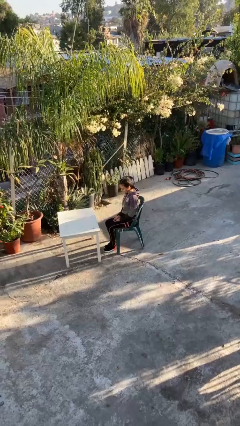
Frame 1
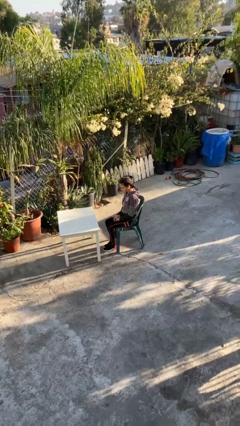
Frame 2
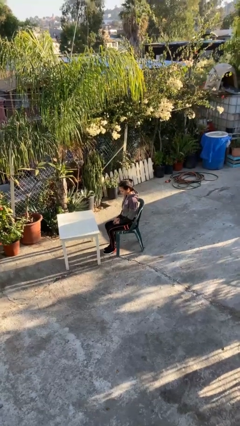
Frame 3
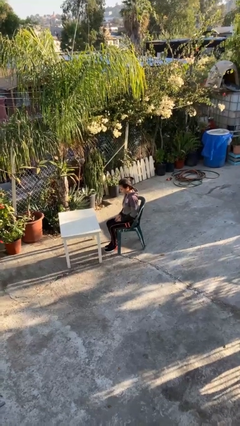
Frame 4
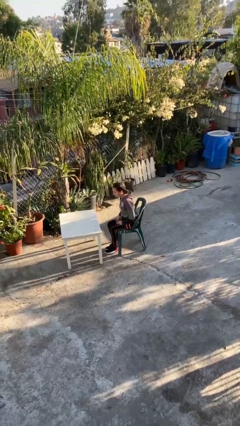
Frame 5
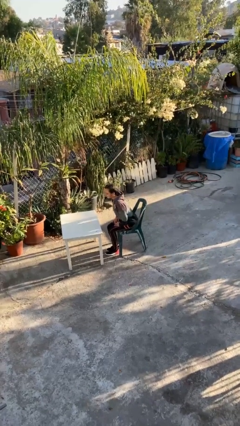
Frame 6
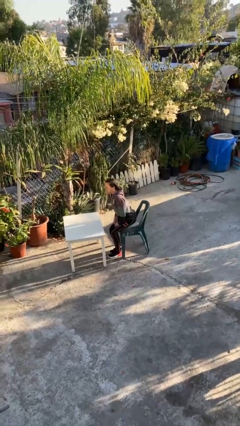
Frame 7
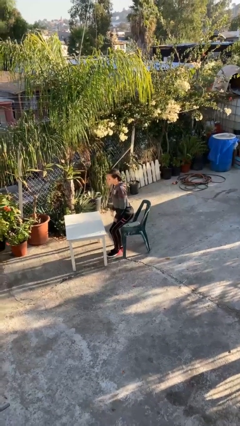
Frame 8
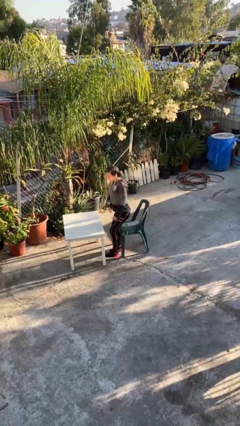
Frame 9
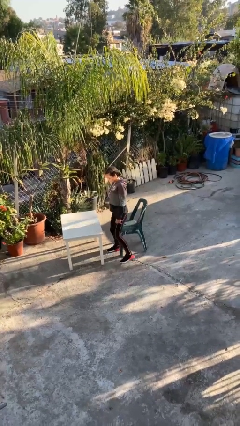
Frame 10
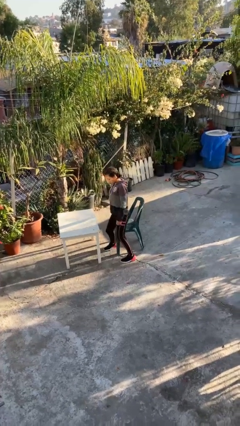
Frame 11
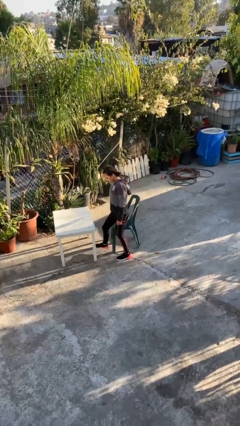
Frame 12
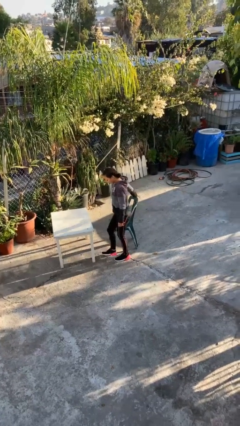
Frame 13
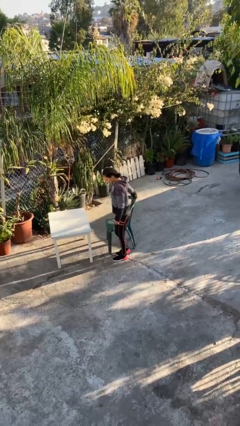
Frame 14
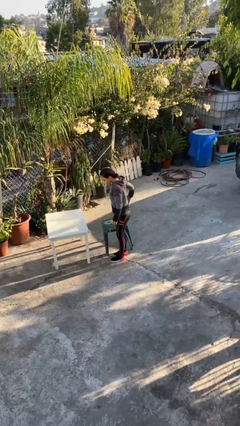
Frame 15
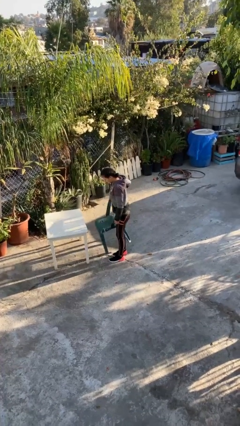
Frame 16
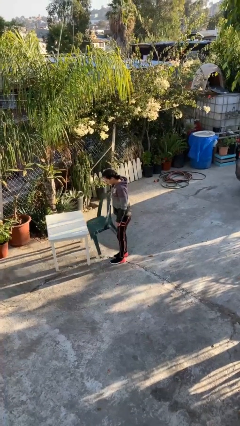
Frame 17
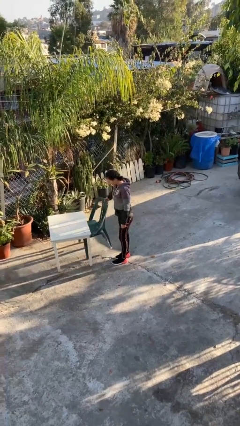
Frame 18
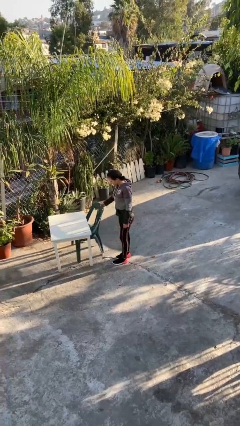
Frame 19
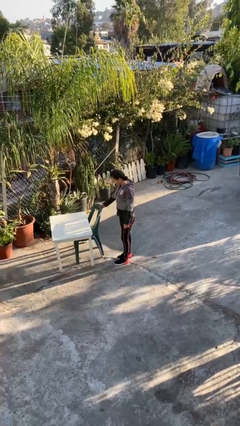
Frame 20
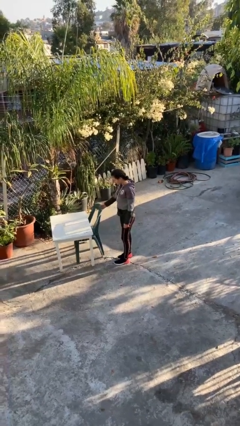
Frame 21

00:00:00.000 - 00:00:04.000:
person stands up

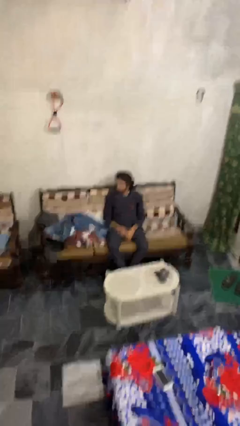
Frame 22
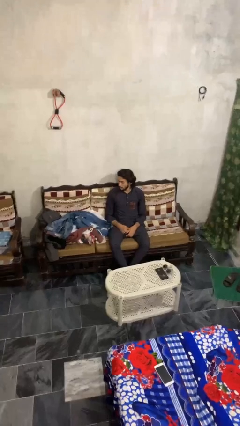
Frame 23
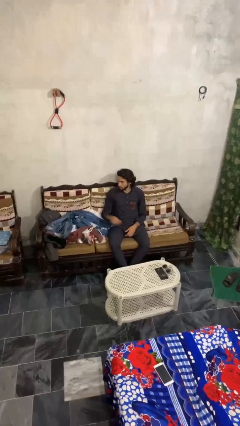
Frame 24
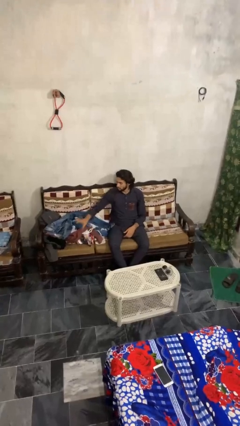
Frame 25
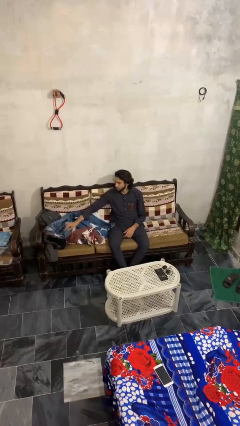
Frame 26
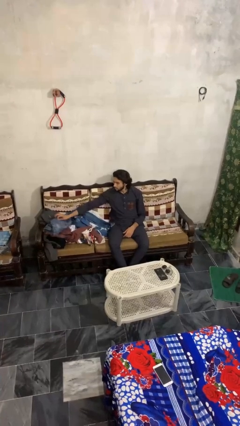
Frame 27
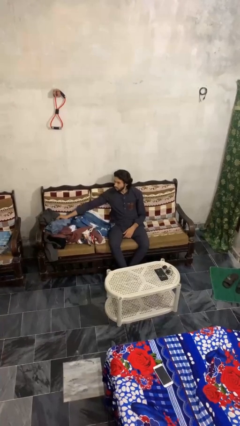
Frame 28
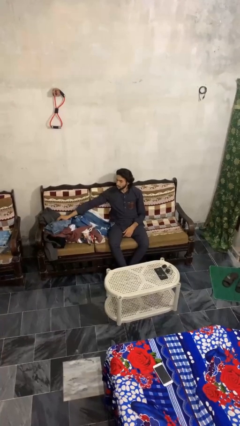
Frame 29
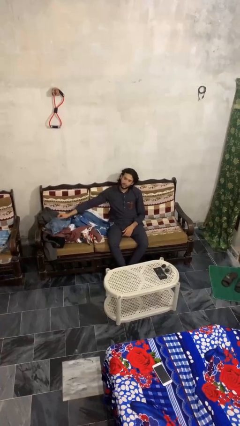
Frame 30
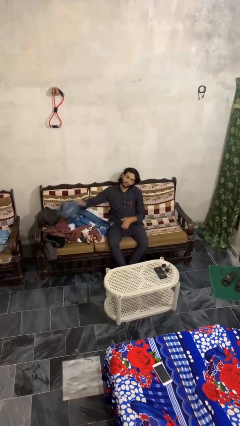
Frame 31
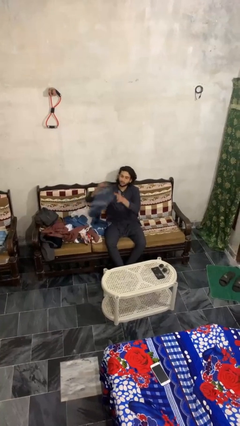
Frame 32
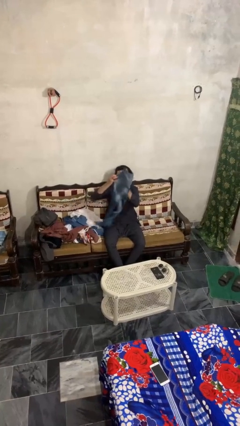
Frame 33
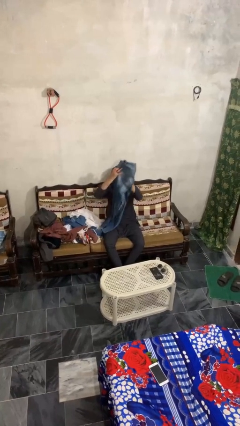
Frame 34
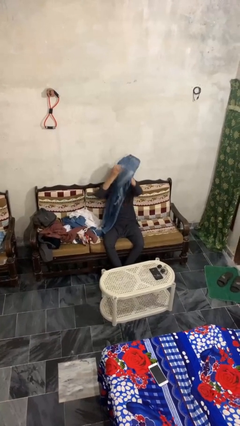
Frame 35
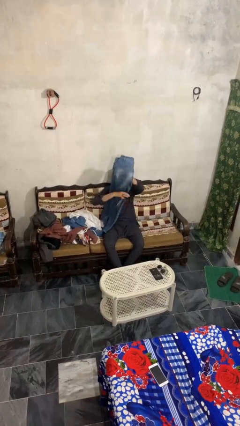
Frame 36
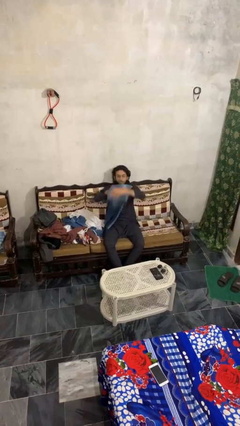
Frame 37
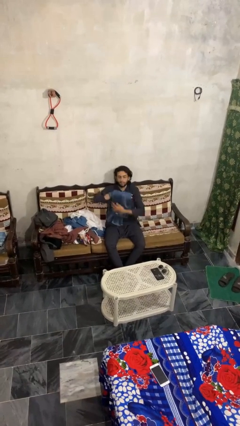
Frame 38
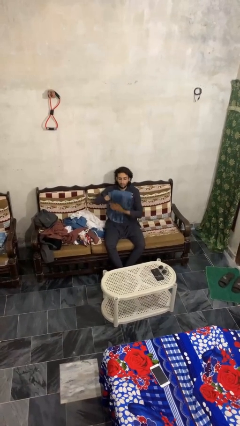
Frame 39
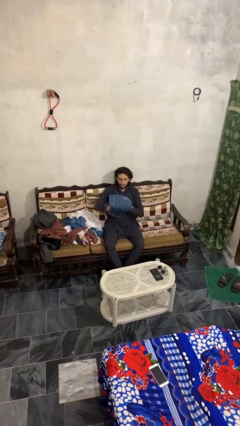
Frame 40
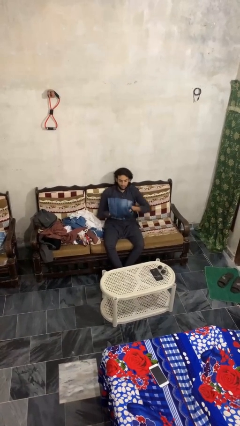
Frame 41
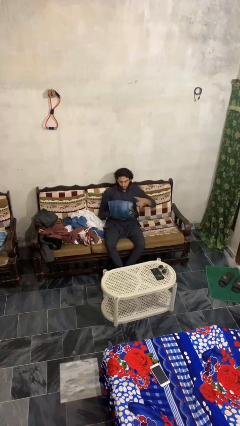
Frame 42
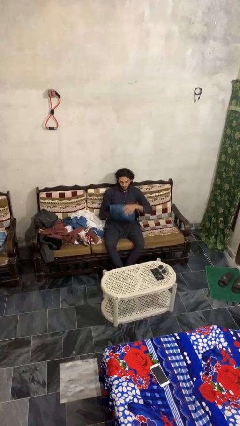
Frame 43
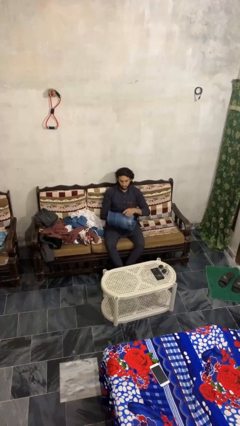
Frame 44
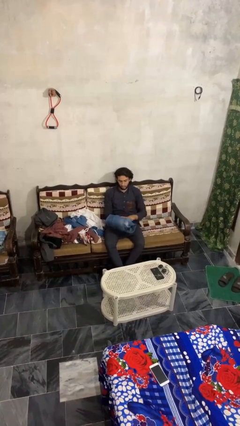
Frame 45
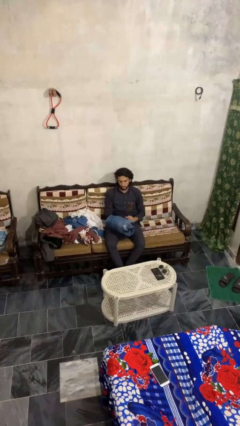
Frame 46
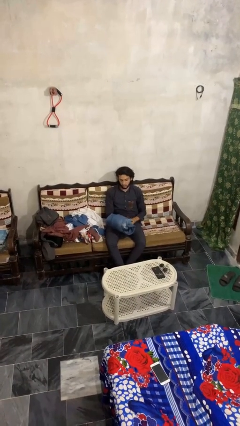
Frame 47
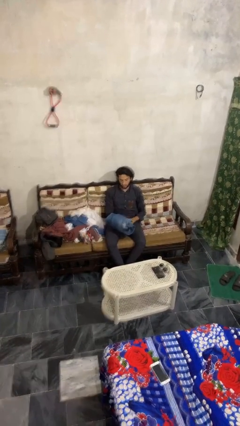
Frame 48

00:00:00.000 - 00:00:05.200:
person folds pants

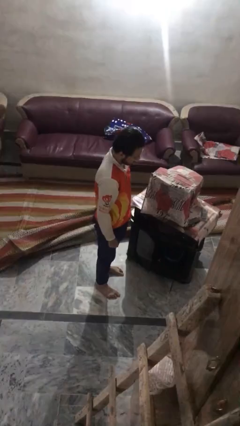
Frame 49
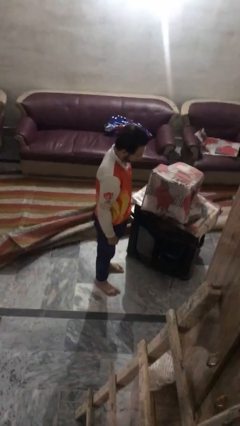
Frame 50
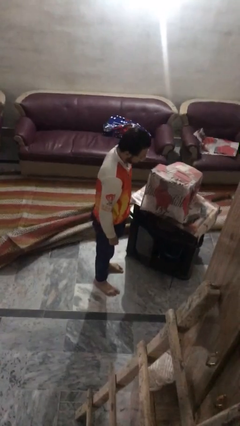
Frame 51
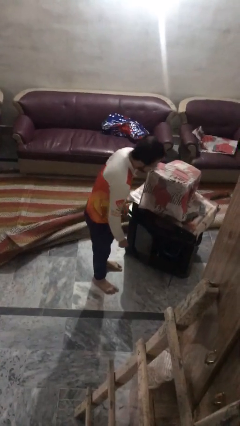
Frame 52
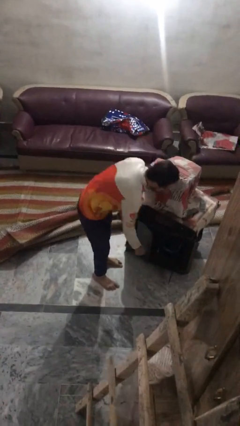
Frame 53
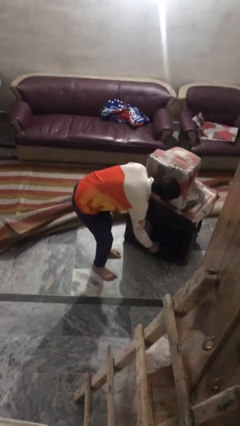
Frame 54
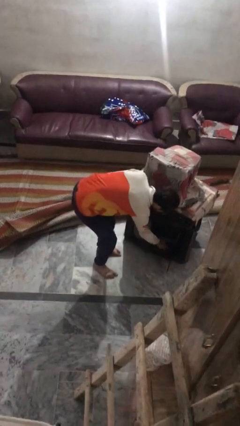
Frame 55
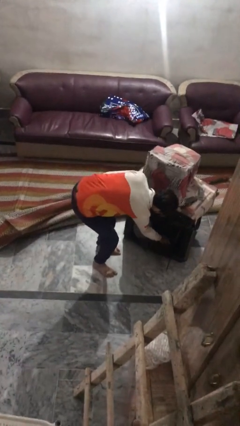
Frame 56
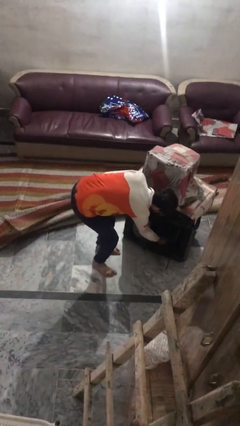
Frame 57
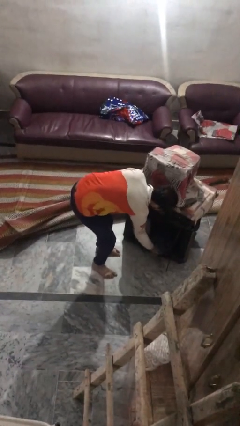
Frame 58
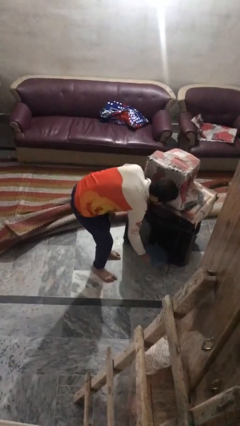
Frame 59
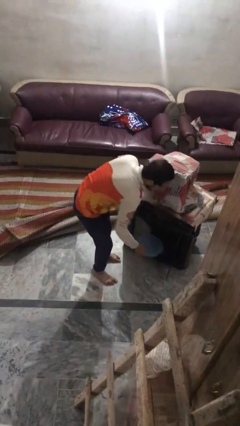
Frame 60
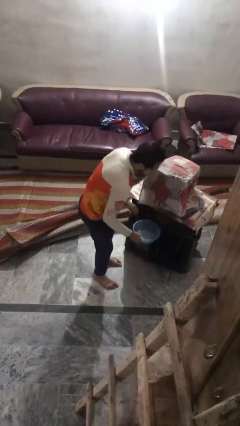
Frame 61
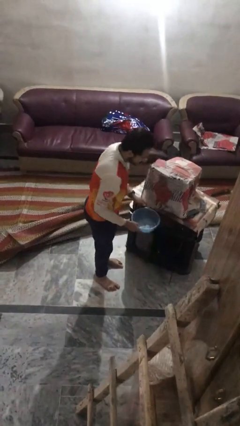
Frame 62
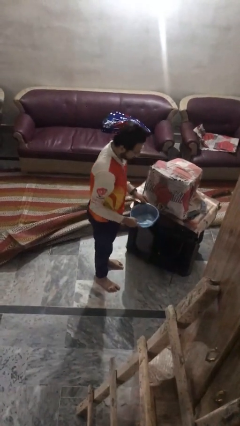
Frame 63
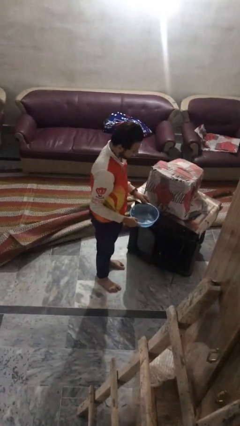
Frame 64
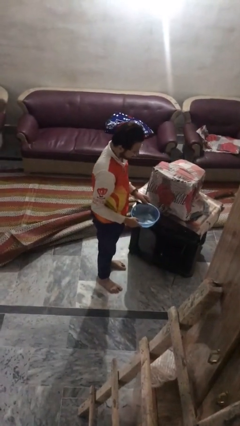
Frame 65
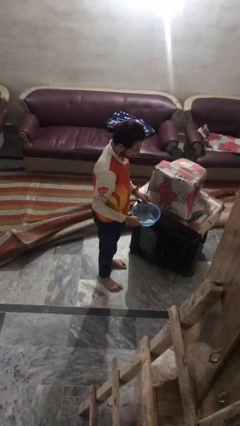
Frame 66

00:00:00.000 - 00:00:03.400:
person picks up object from cabinet

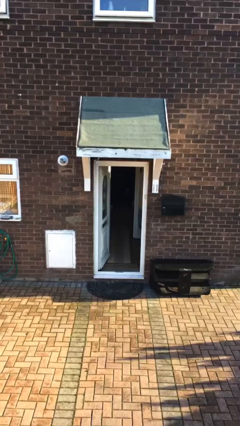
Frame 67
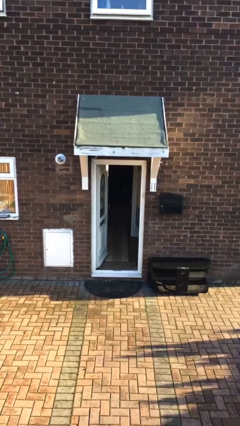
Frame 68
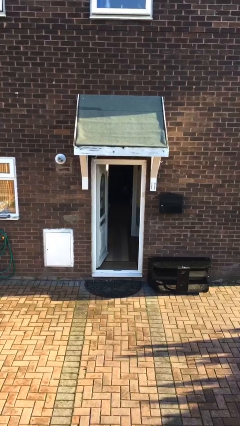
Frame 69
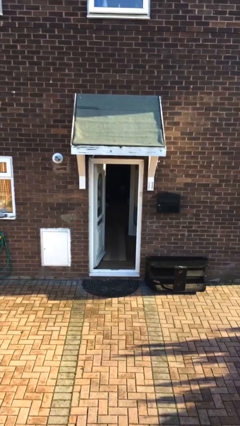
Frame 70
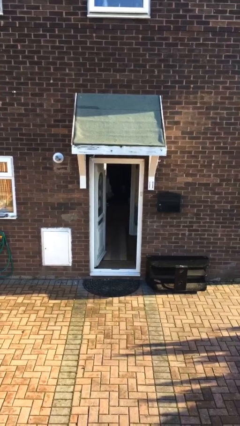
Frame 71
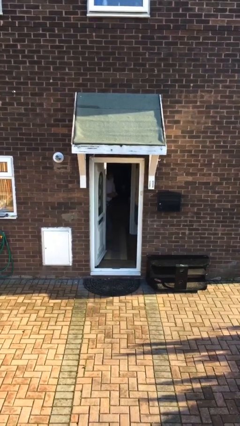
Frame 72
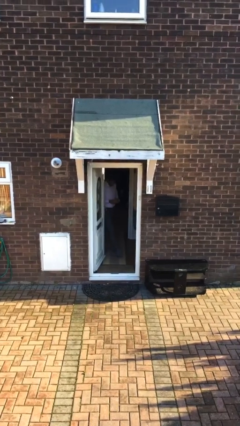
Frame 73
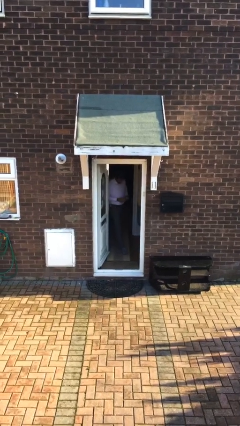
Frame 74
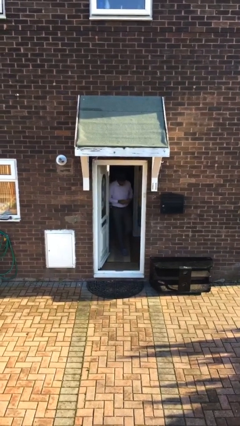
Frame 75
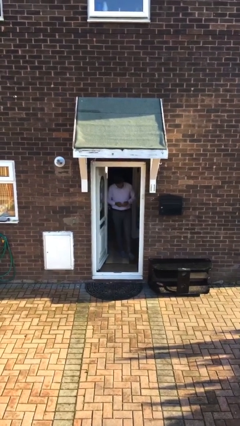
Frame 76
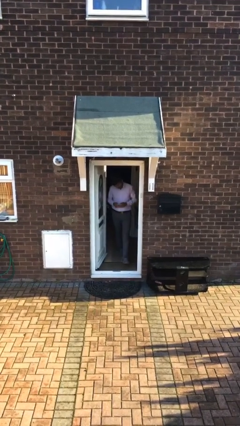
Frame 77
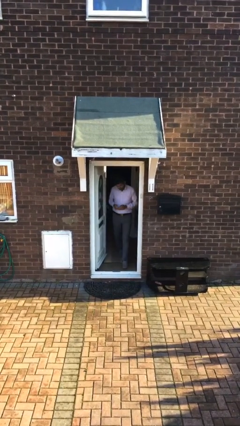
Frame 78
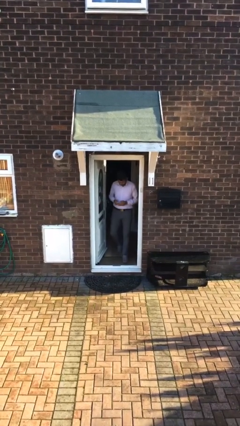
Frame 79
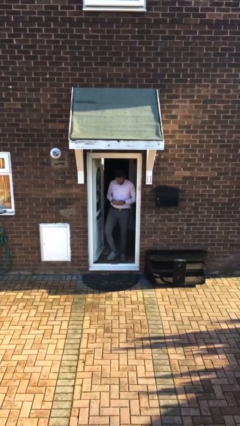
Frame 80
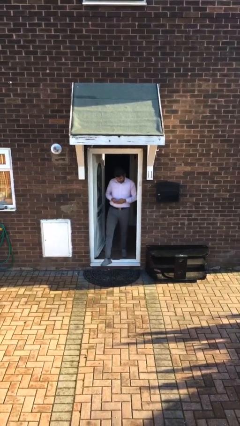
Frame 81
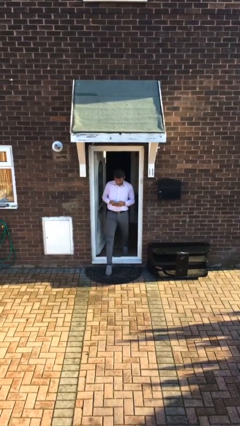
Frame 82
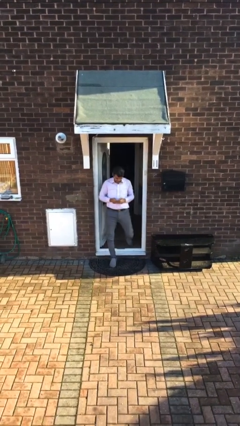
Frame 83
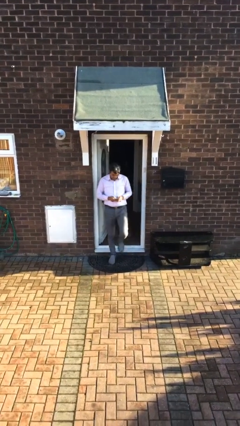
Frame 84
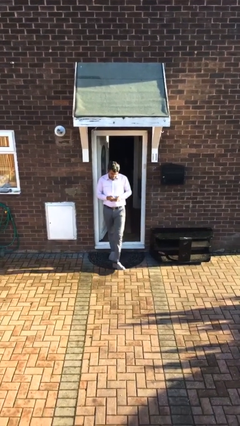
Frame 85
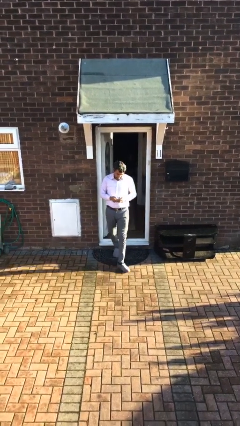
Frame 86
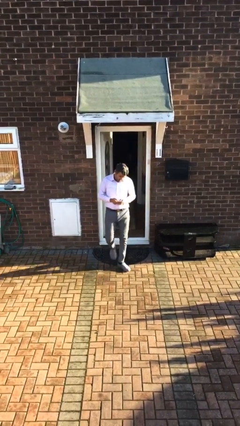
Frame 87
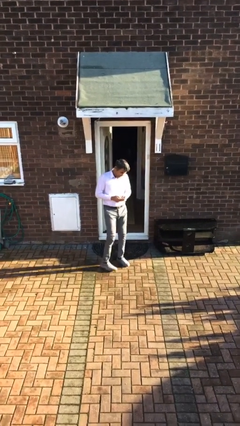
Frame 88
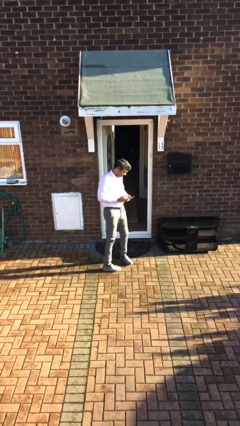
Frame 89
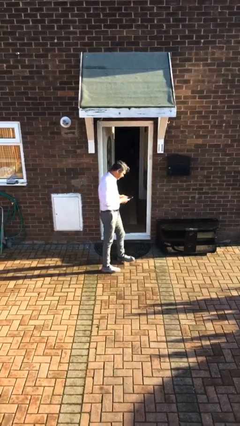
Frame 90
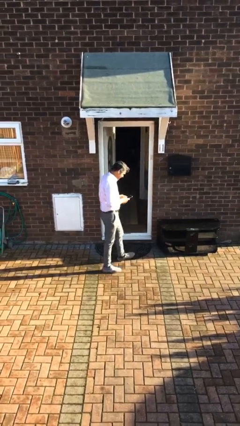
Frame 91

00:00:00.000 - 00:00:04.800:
person enters scene through structure

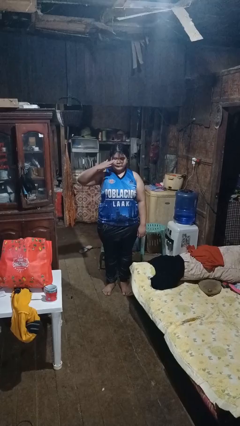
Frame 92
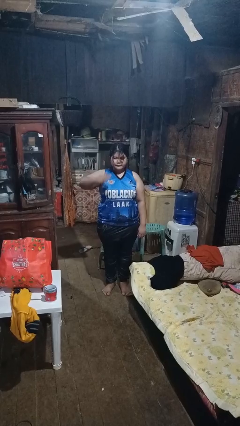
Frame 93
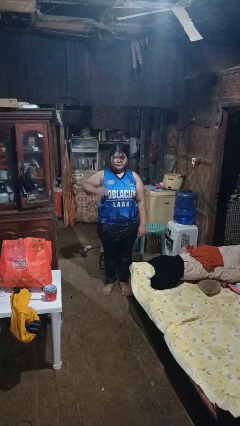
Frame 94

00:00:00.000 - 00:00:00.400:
person salutes
